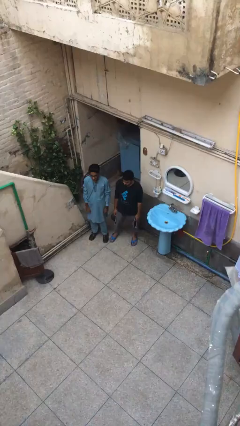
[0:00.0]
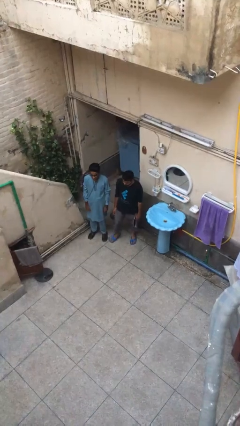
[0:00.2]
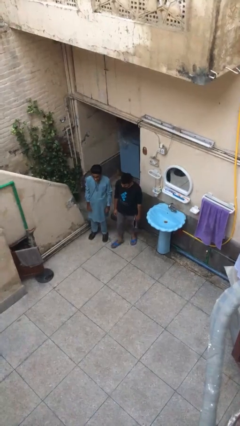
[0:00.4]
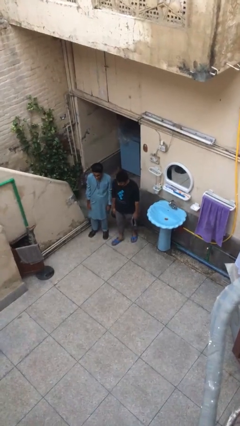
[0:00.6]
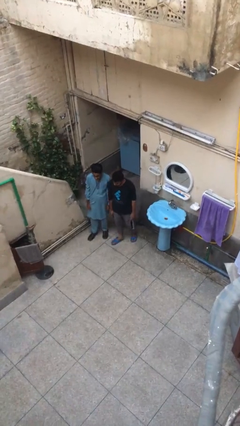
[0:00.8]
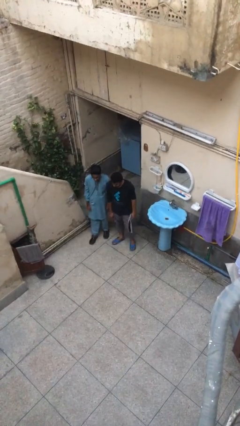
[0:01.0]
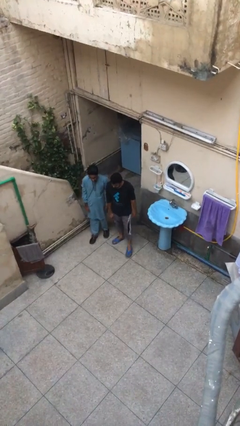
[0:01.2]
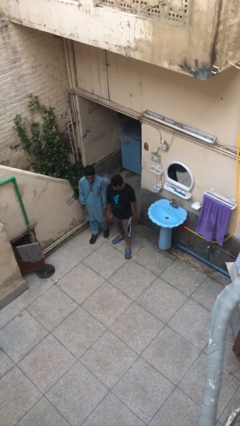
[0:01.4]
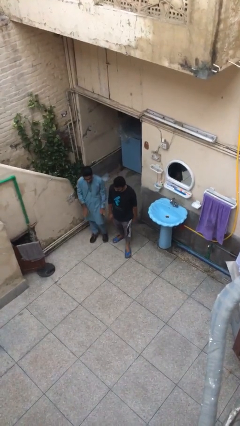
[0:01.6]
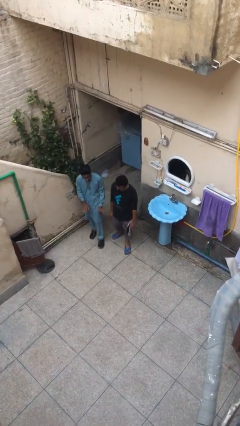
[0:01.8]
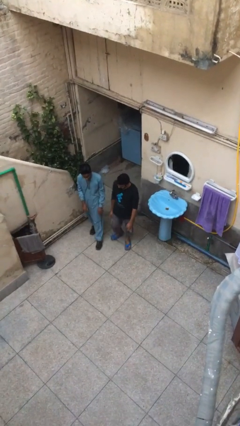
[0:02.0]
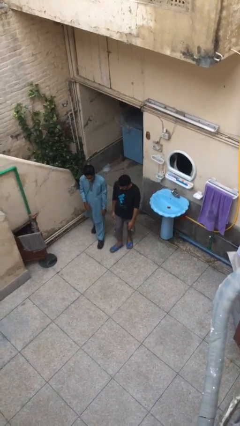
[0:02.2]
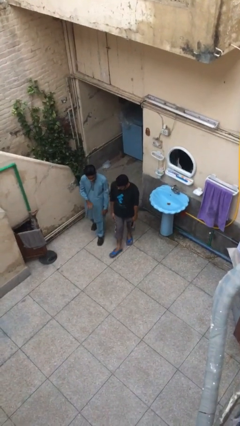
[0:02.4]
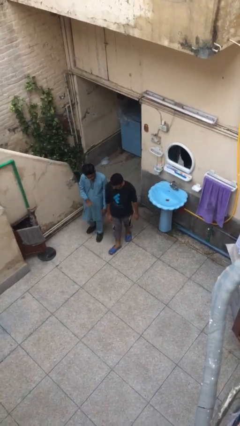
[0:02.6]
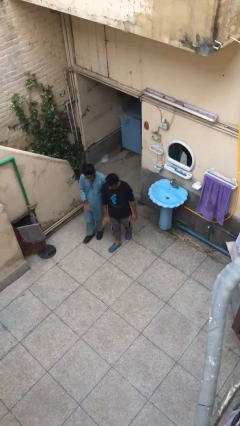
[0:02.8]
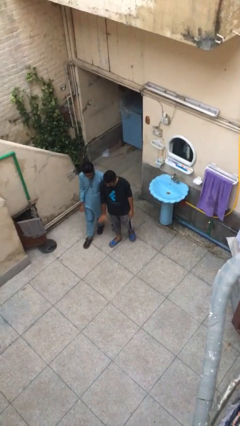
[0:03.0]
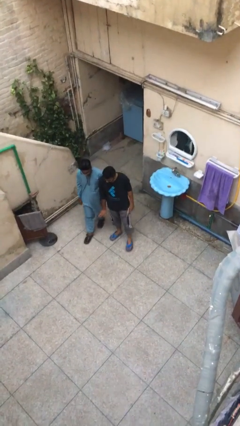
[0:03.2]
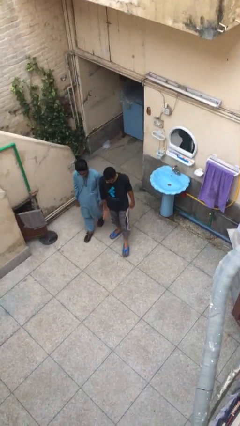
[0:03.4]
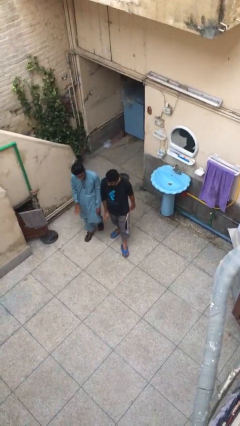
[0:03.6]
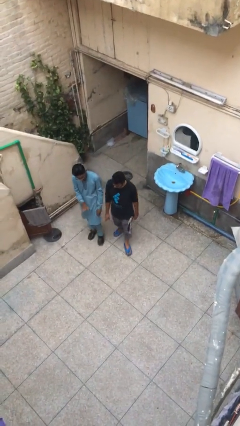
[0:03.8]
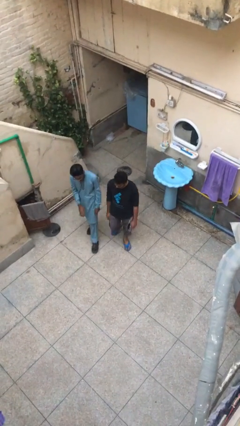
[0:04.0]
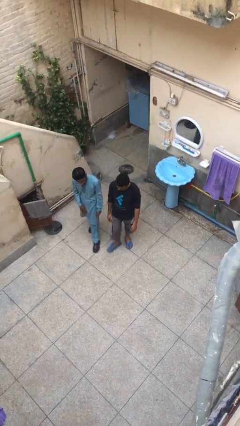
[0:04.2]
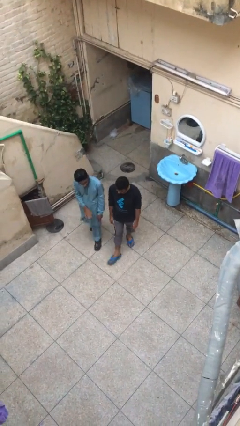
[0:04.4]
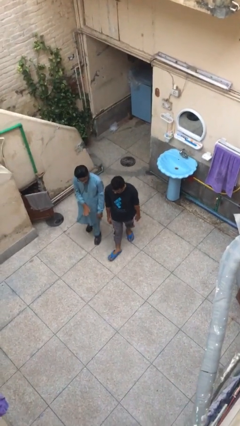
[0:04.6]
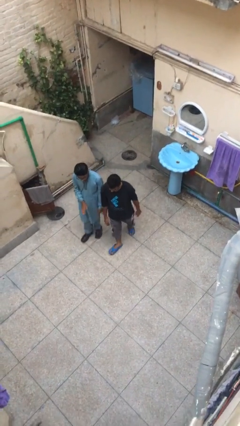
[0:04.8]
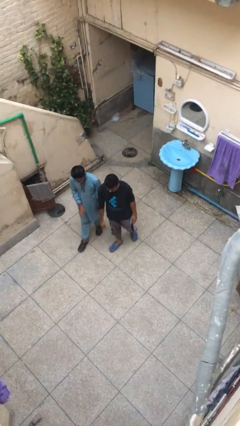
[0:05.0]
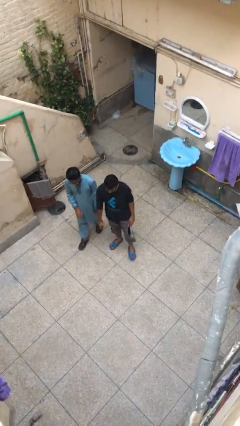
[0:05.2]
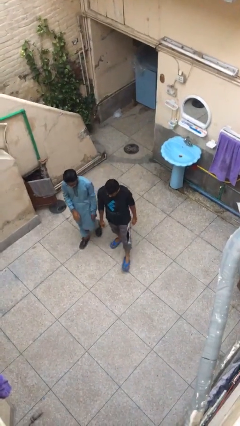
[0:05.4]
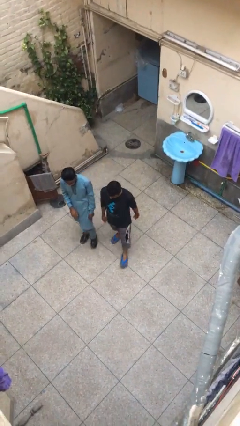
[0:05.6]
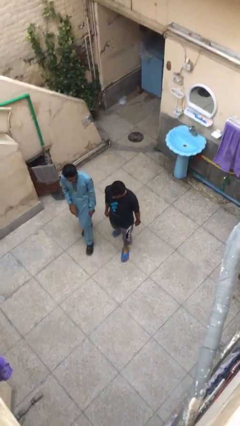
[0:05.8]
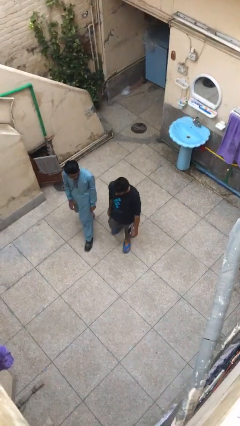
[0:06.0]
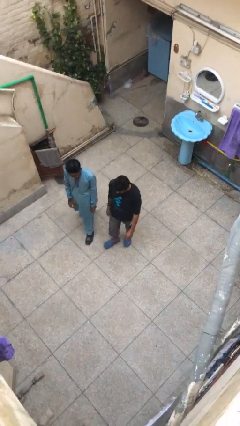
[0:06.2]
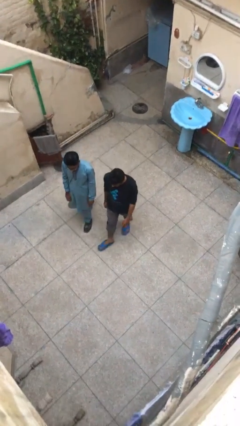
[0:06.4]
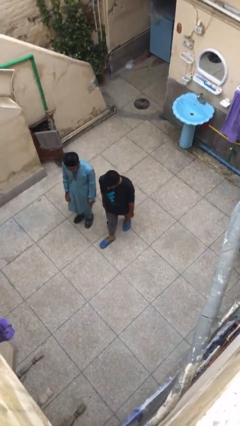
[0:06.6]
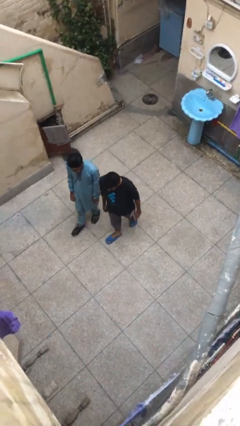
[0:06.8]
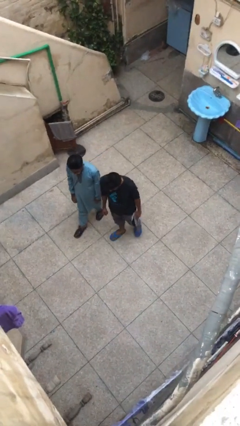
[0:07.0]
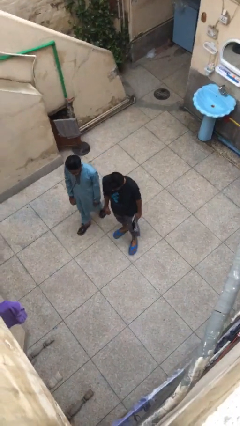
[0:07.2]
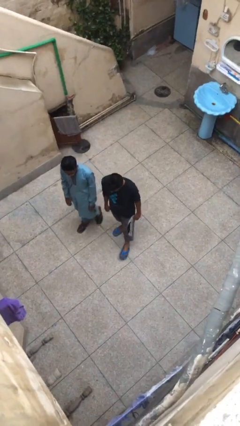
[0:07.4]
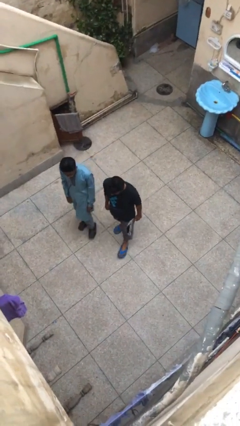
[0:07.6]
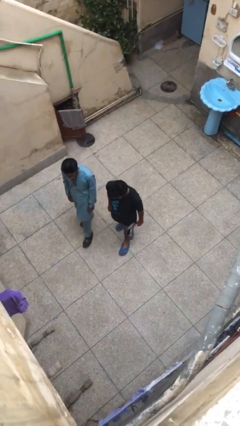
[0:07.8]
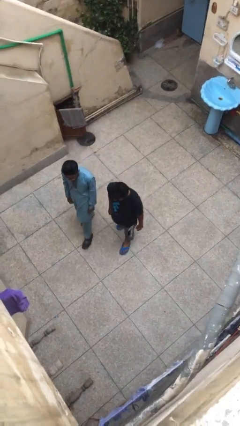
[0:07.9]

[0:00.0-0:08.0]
person talks to person

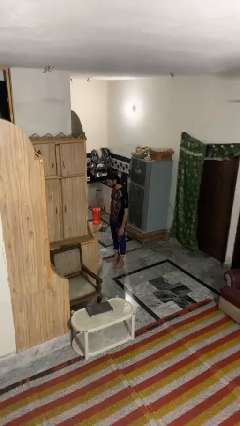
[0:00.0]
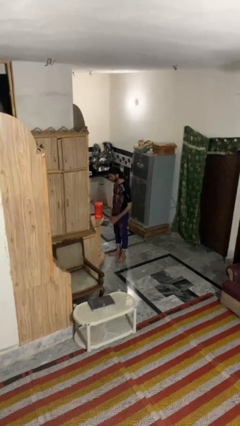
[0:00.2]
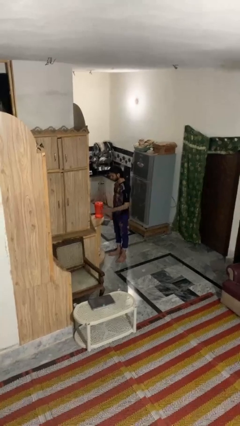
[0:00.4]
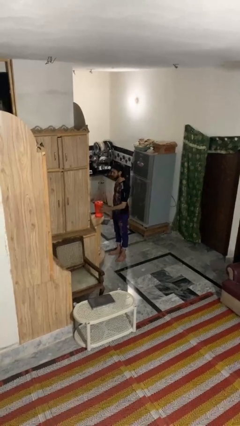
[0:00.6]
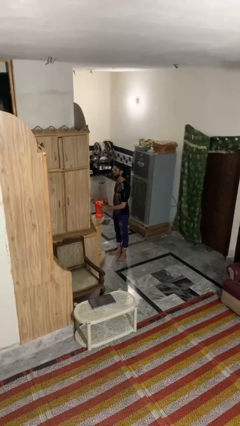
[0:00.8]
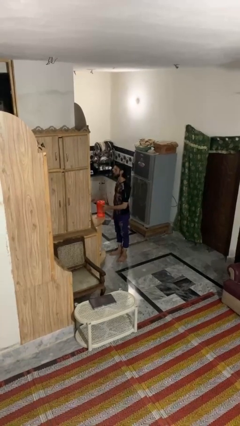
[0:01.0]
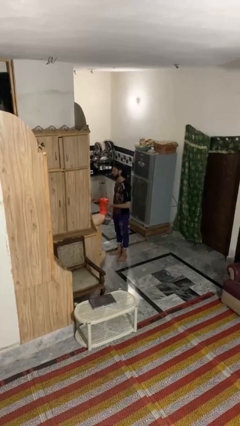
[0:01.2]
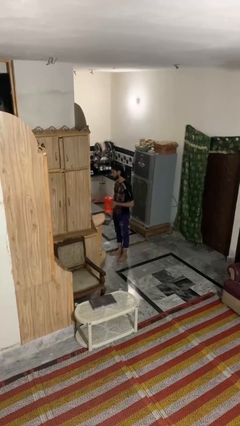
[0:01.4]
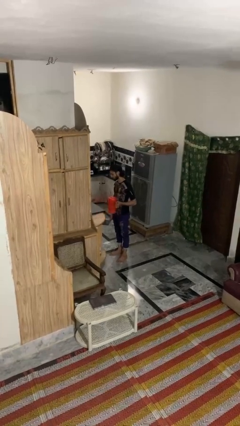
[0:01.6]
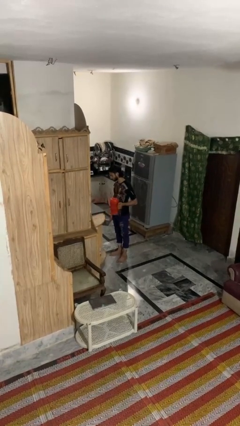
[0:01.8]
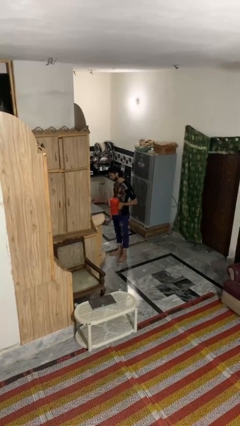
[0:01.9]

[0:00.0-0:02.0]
person picks up object from countertop

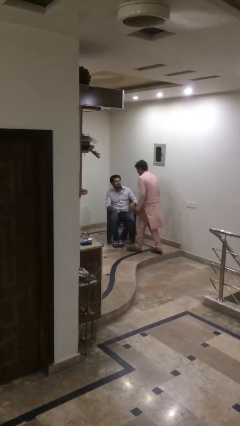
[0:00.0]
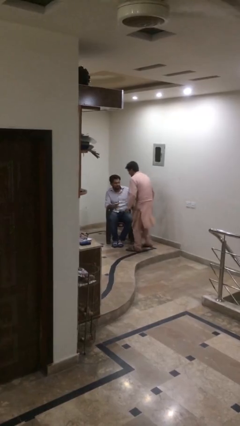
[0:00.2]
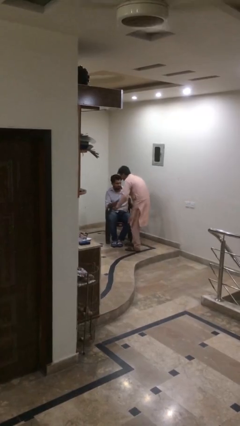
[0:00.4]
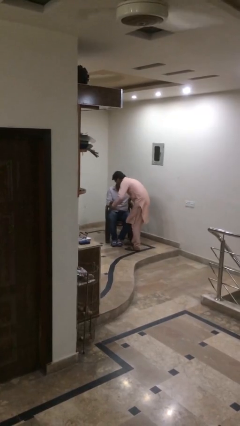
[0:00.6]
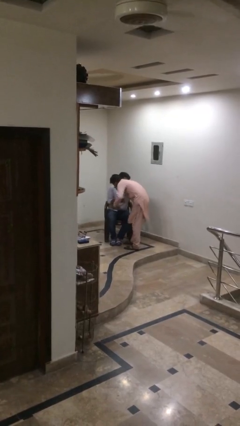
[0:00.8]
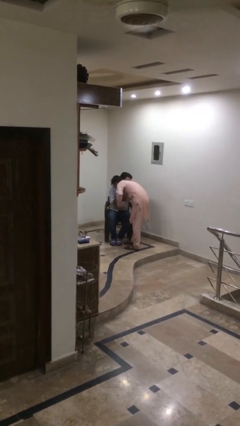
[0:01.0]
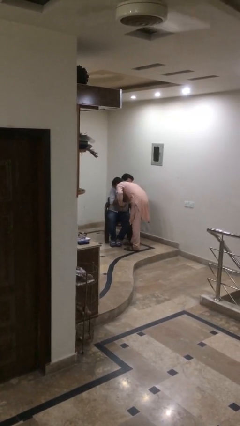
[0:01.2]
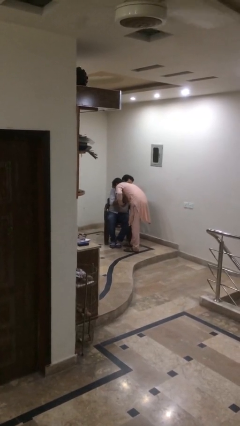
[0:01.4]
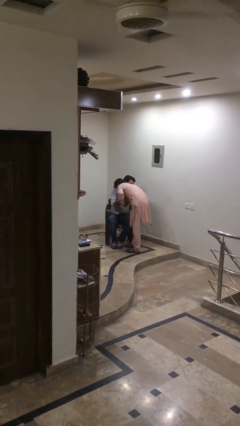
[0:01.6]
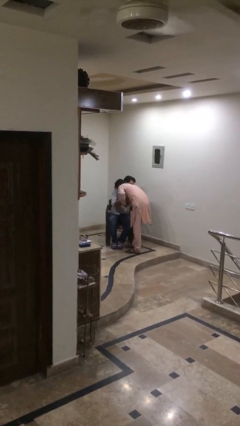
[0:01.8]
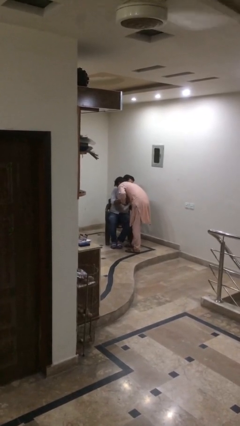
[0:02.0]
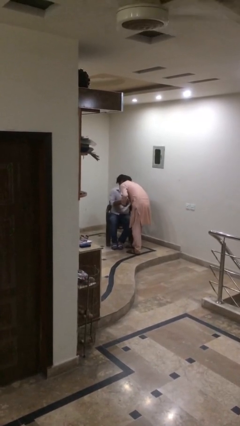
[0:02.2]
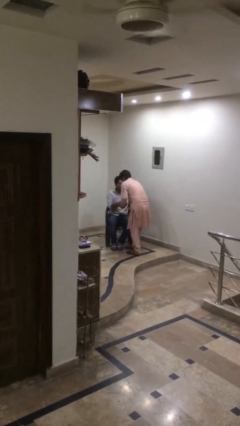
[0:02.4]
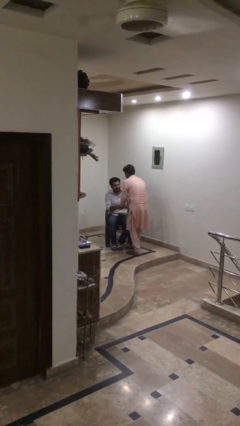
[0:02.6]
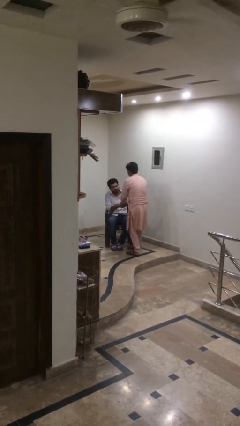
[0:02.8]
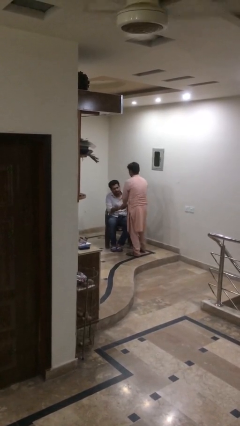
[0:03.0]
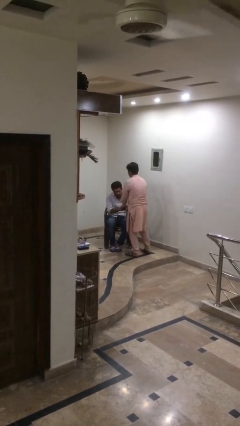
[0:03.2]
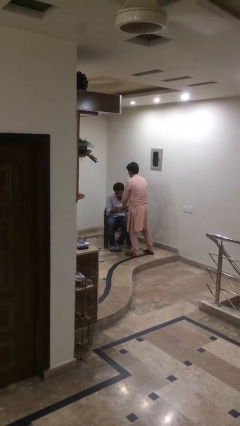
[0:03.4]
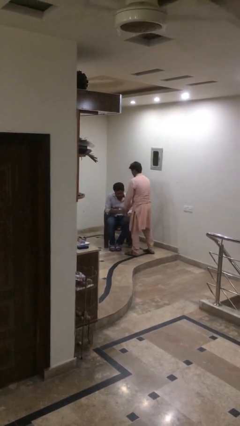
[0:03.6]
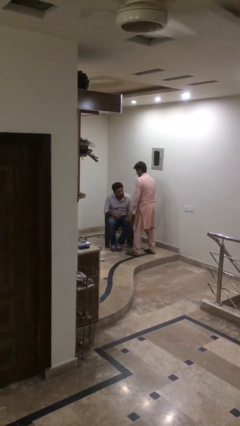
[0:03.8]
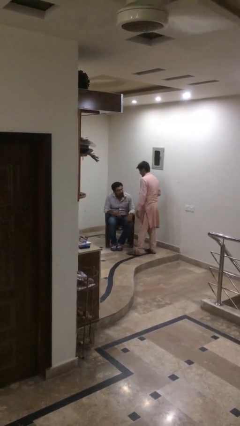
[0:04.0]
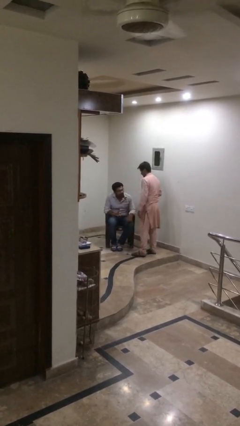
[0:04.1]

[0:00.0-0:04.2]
person embraces person

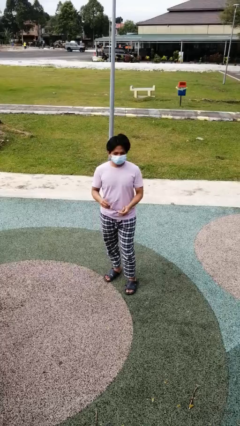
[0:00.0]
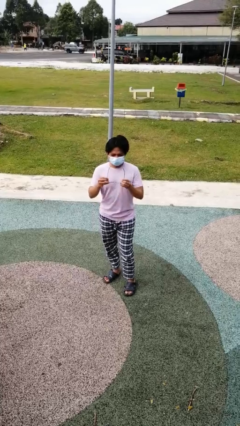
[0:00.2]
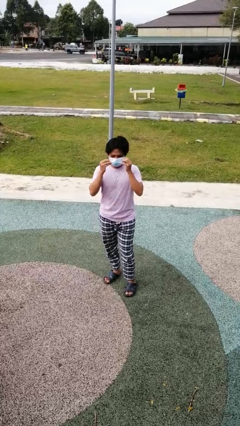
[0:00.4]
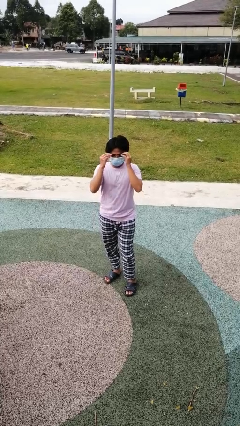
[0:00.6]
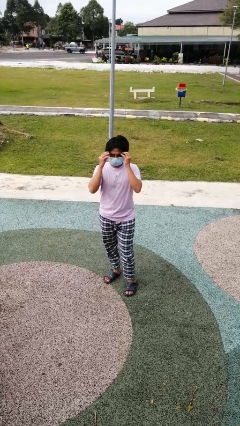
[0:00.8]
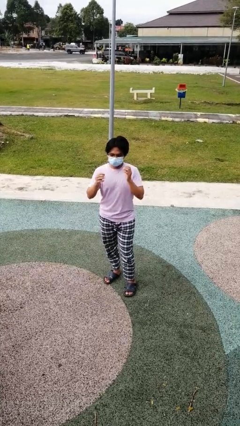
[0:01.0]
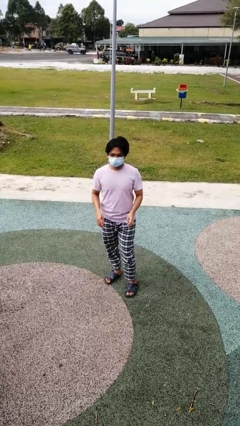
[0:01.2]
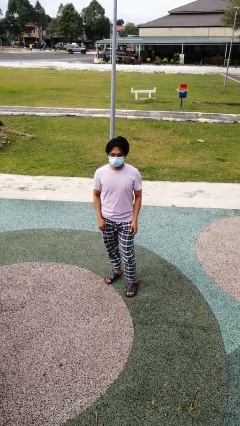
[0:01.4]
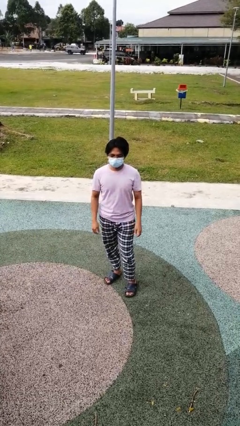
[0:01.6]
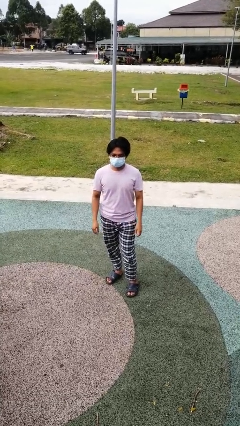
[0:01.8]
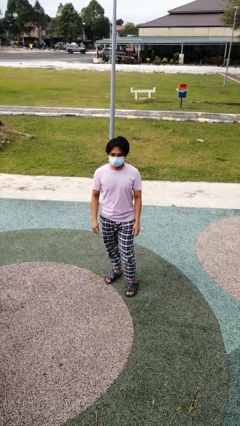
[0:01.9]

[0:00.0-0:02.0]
person puts on glasses

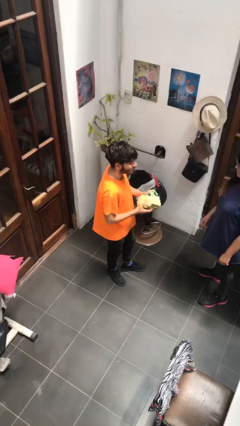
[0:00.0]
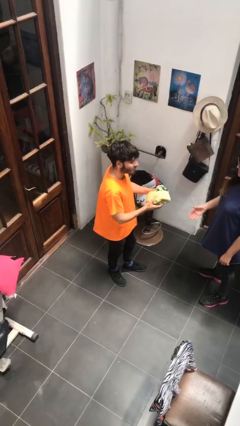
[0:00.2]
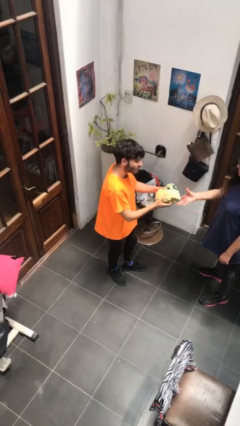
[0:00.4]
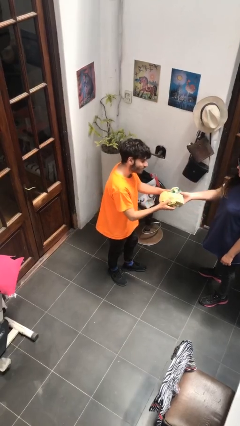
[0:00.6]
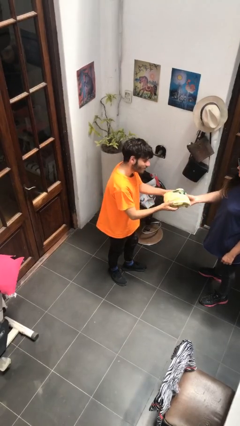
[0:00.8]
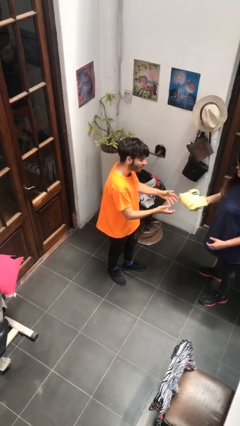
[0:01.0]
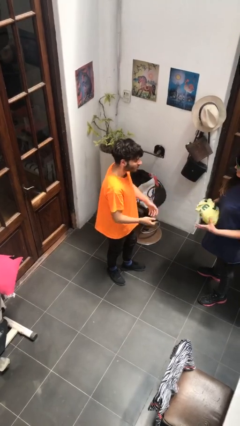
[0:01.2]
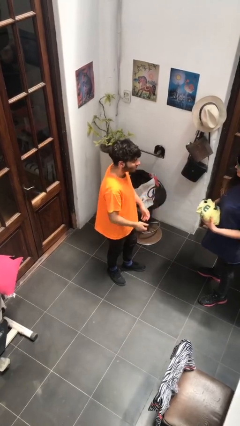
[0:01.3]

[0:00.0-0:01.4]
person transfers object to person

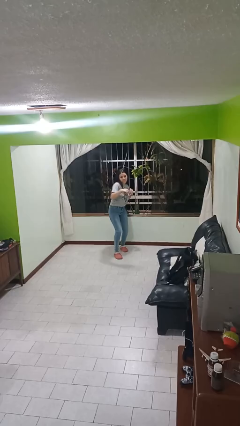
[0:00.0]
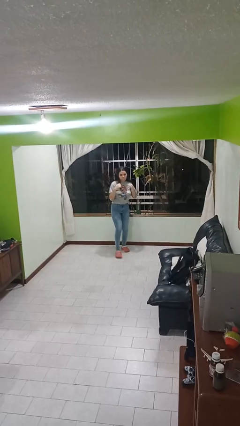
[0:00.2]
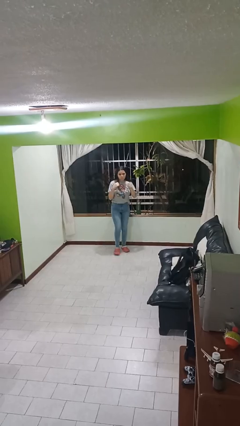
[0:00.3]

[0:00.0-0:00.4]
person punches
